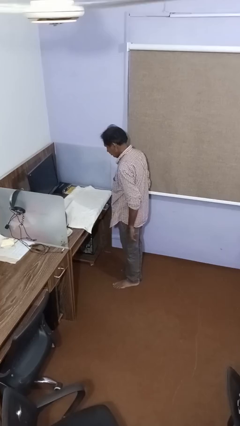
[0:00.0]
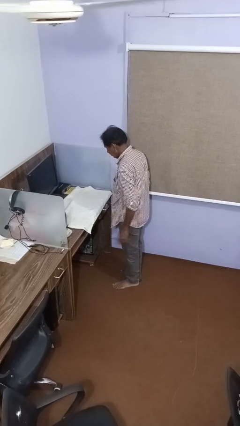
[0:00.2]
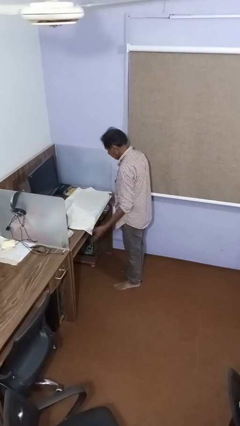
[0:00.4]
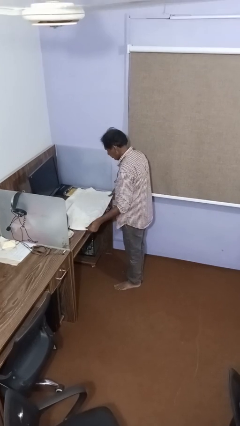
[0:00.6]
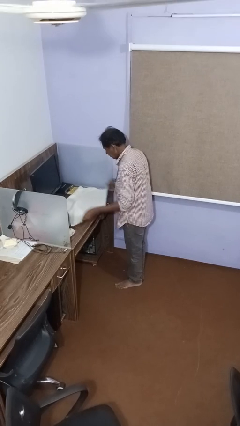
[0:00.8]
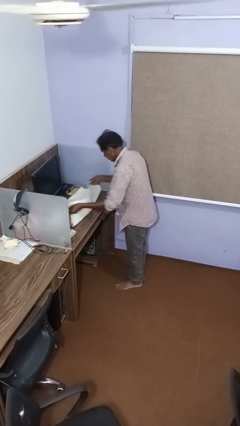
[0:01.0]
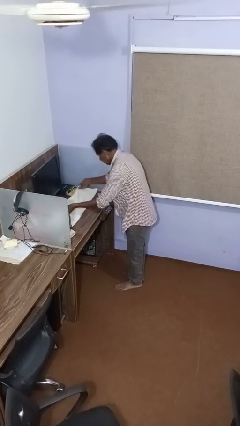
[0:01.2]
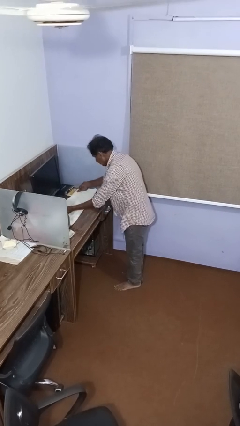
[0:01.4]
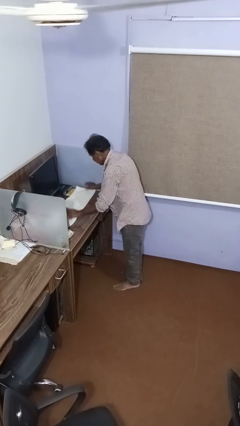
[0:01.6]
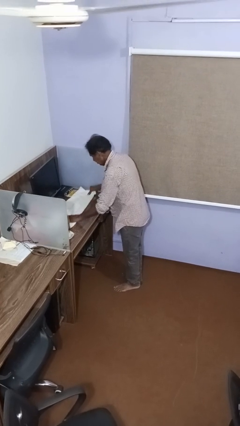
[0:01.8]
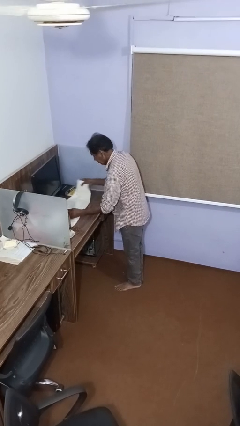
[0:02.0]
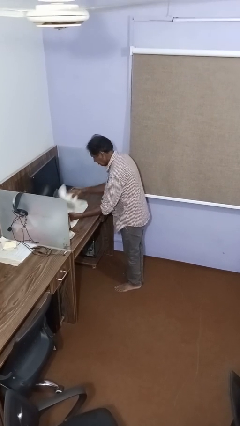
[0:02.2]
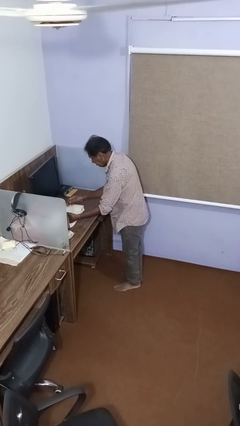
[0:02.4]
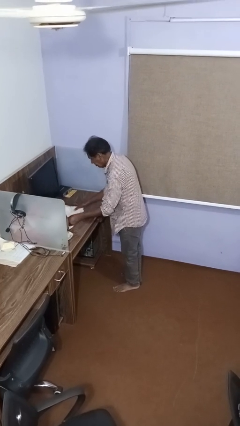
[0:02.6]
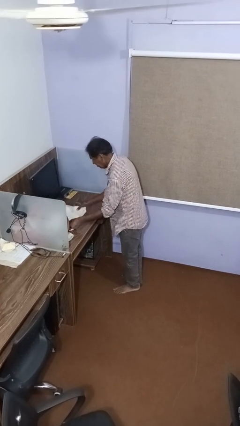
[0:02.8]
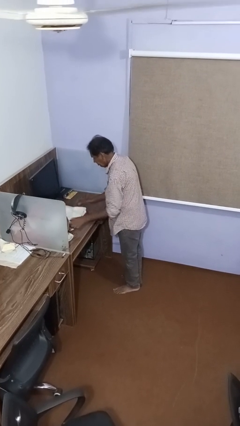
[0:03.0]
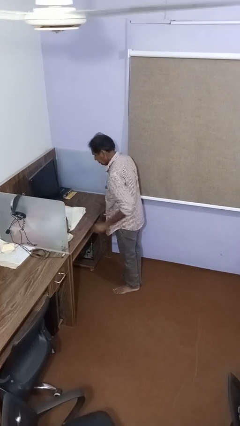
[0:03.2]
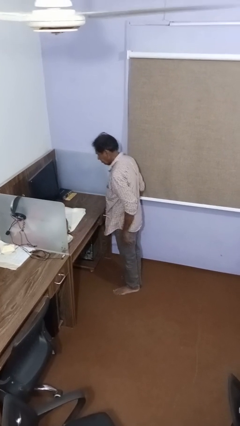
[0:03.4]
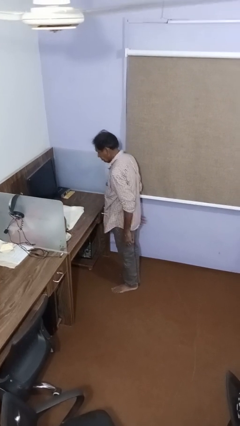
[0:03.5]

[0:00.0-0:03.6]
person folds towel

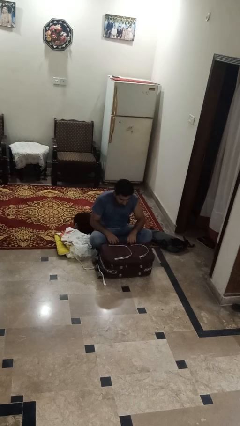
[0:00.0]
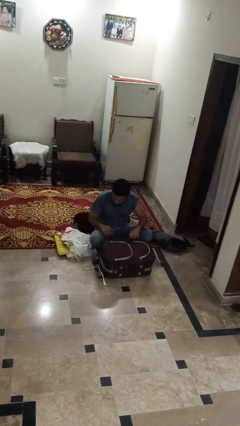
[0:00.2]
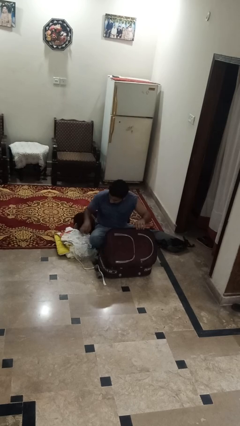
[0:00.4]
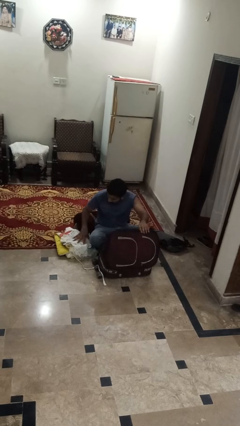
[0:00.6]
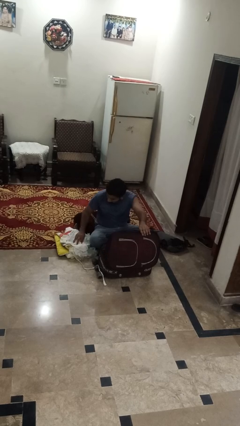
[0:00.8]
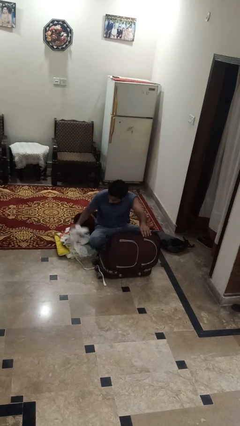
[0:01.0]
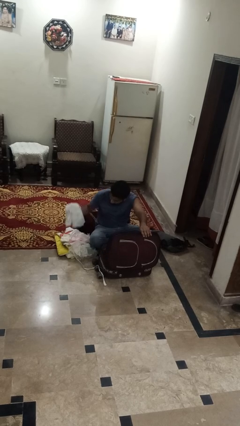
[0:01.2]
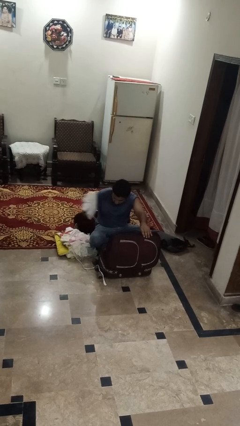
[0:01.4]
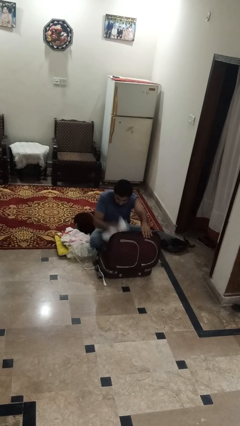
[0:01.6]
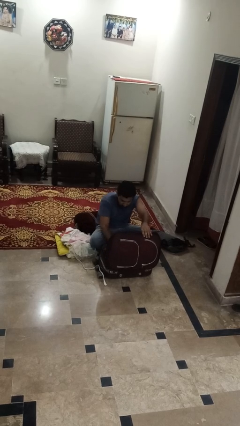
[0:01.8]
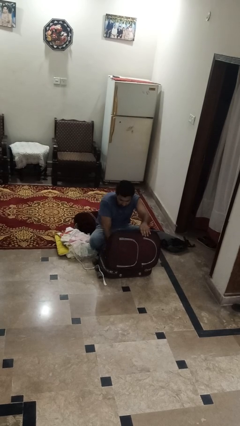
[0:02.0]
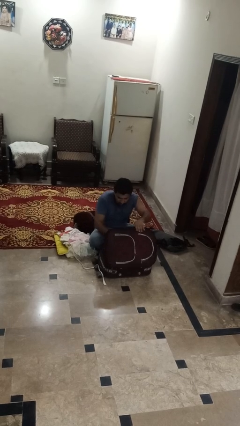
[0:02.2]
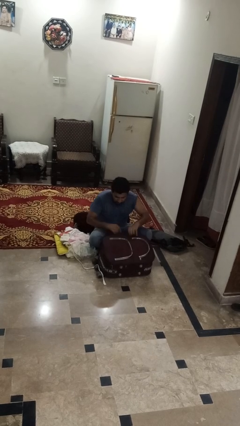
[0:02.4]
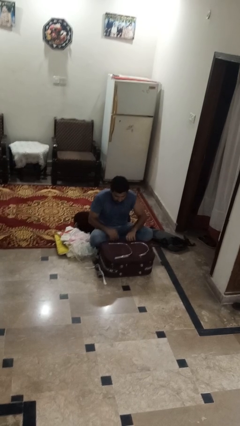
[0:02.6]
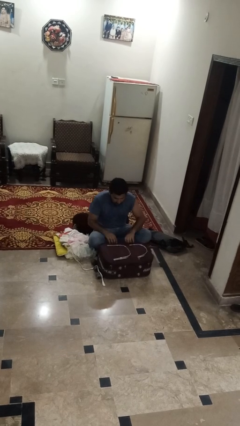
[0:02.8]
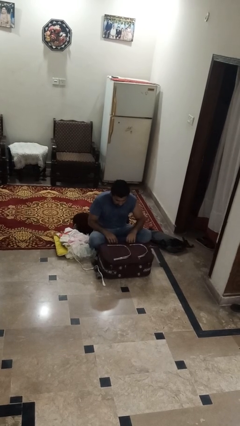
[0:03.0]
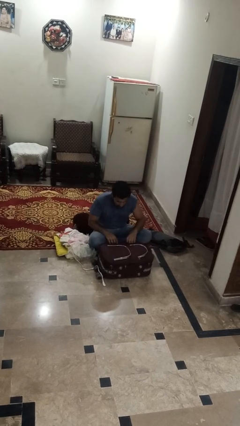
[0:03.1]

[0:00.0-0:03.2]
person loads clothes into suitcase

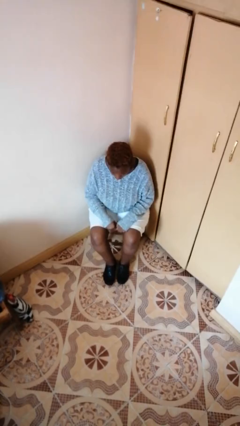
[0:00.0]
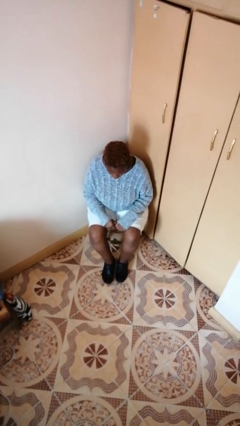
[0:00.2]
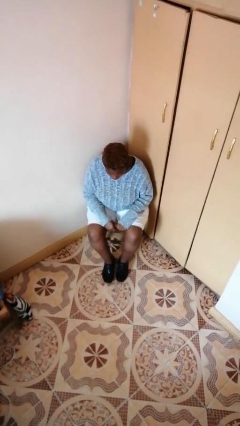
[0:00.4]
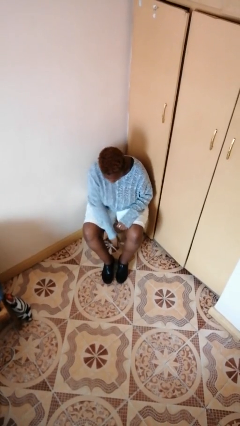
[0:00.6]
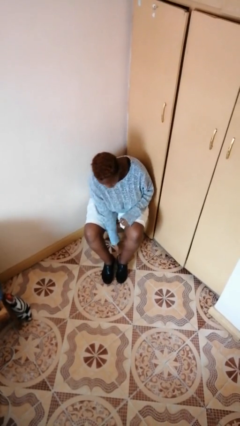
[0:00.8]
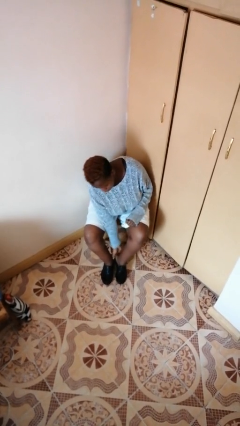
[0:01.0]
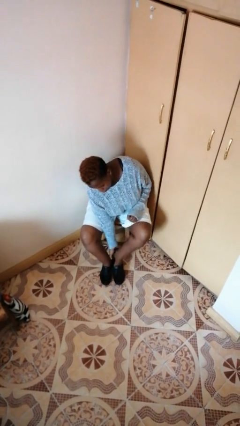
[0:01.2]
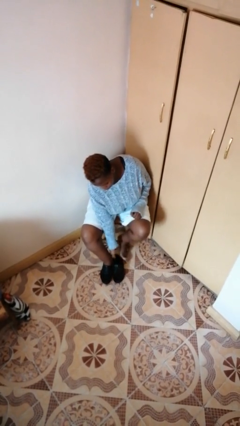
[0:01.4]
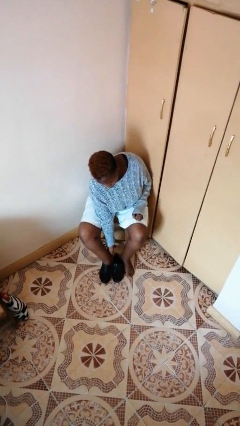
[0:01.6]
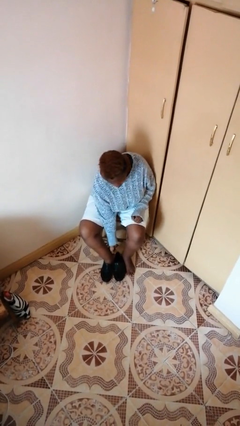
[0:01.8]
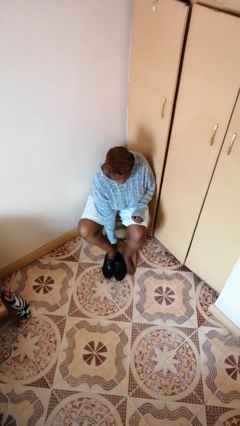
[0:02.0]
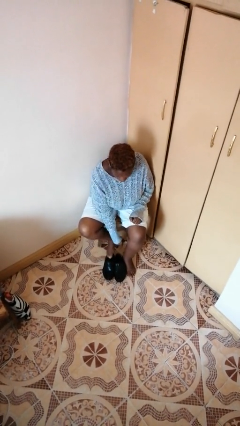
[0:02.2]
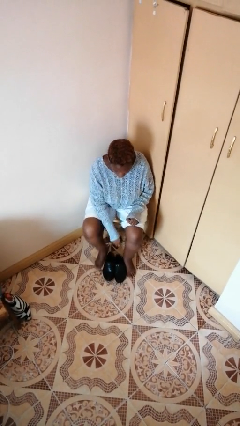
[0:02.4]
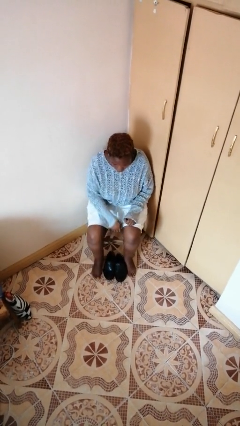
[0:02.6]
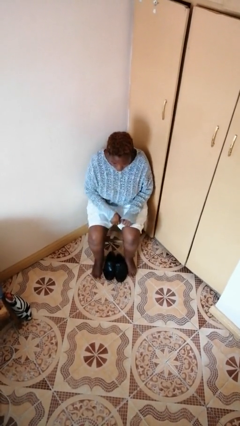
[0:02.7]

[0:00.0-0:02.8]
person takes off shoes

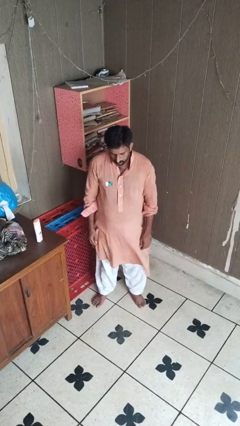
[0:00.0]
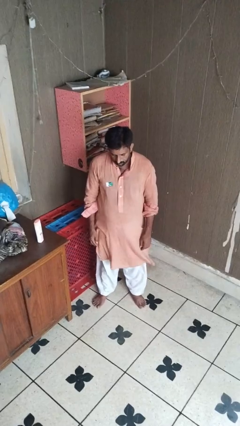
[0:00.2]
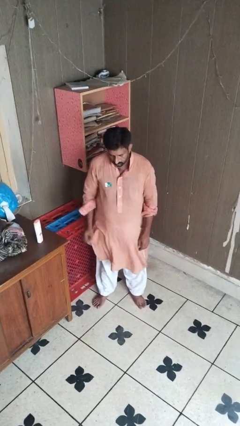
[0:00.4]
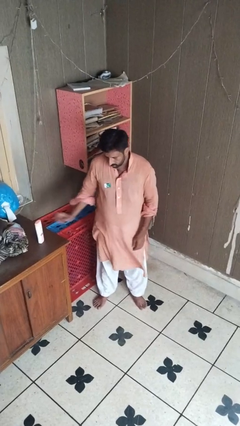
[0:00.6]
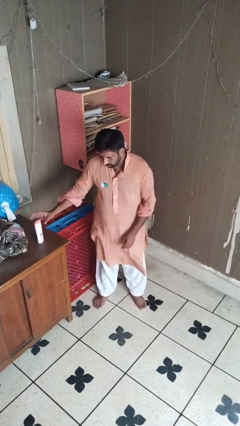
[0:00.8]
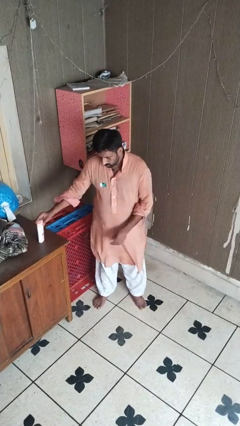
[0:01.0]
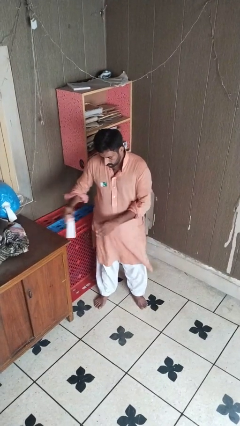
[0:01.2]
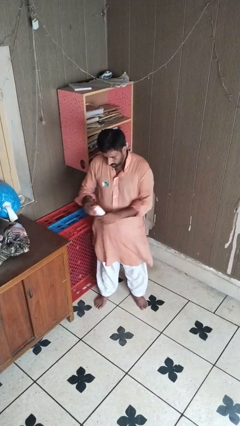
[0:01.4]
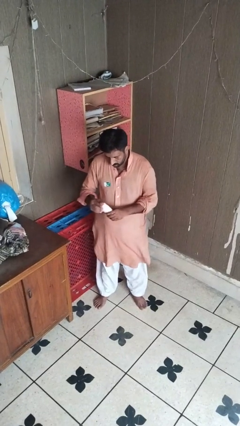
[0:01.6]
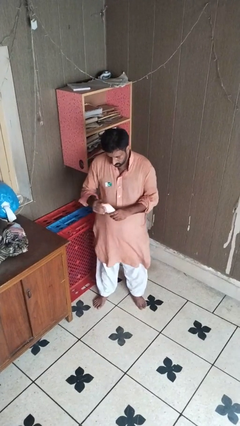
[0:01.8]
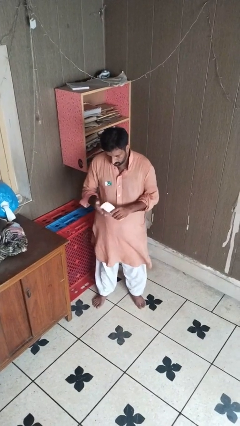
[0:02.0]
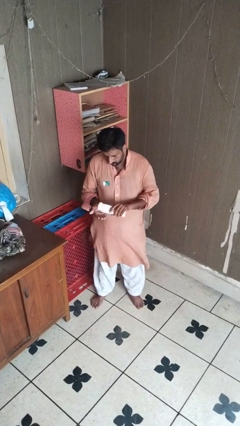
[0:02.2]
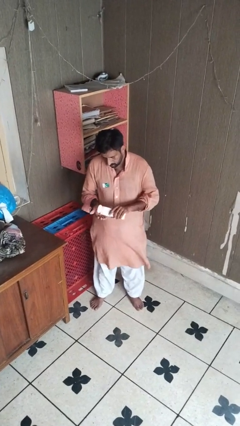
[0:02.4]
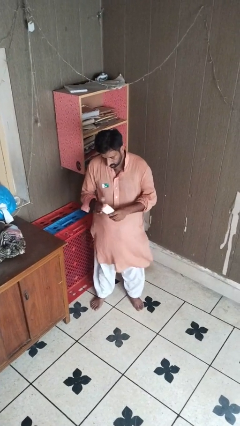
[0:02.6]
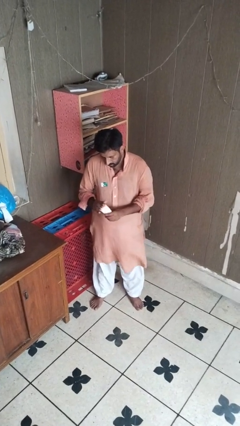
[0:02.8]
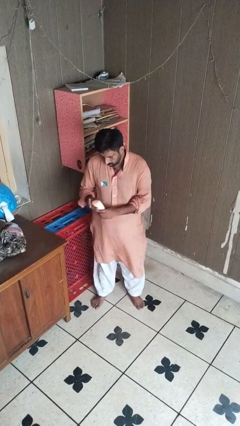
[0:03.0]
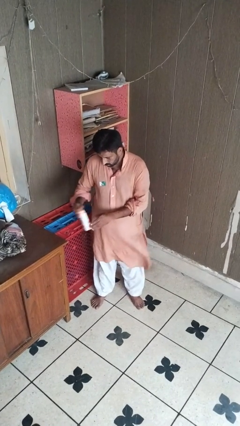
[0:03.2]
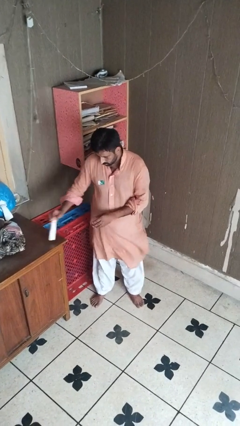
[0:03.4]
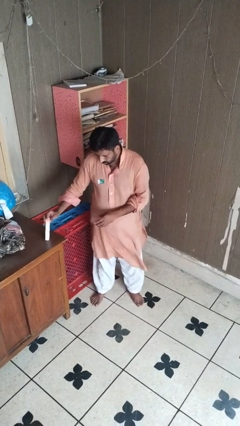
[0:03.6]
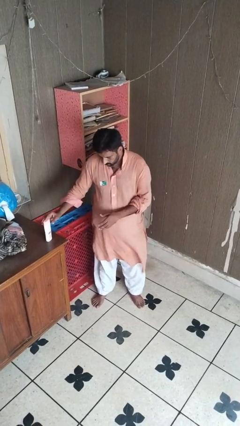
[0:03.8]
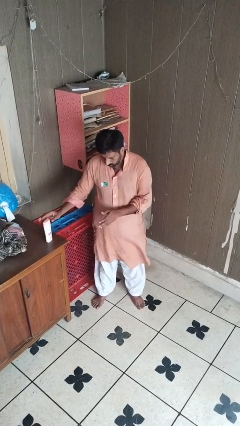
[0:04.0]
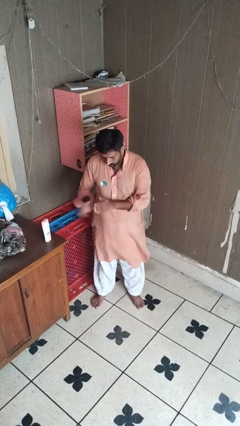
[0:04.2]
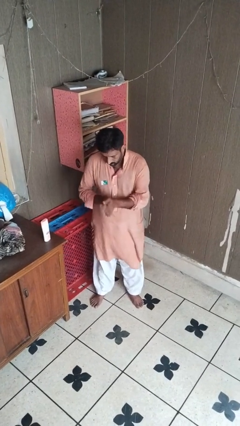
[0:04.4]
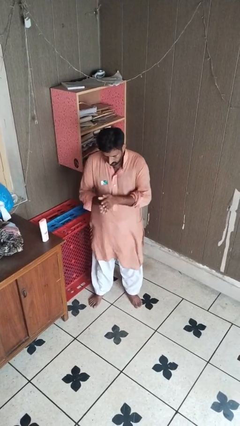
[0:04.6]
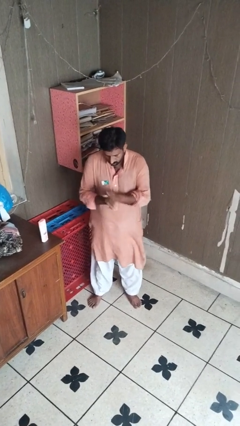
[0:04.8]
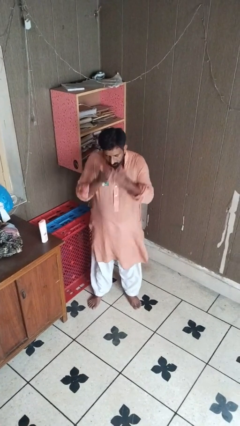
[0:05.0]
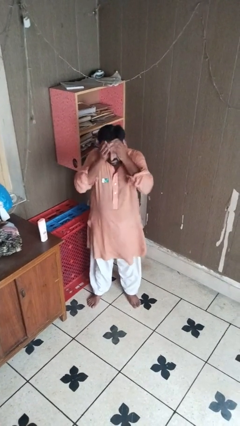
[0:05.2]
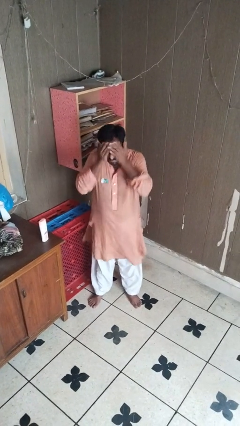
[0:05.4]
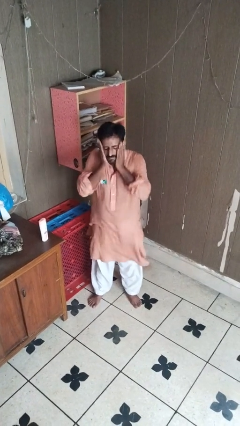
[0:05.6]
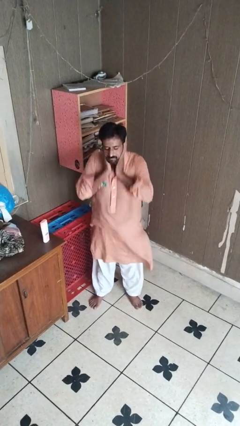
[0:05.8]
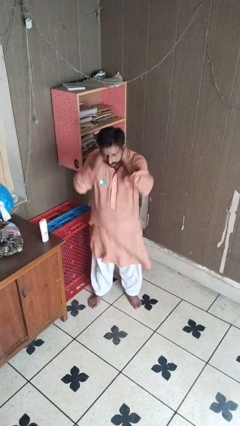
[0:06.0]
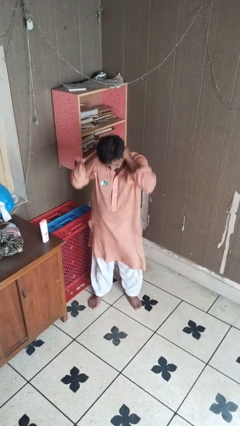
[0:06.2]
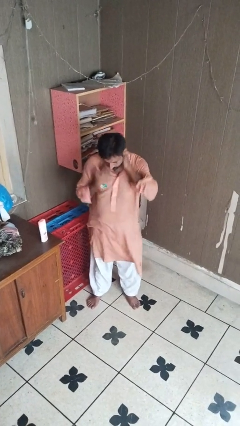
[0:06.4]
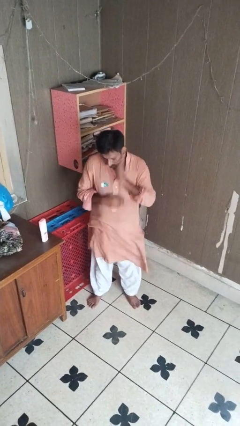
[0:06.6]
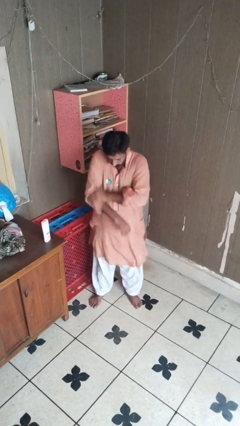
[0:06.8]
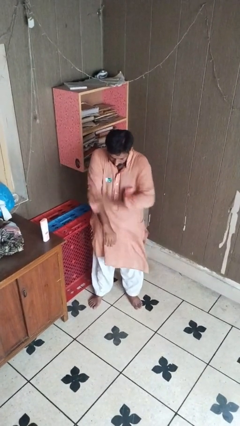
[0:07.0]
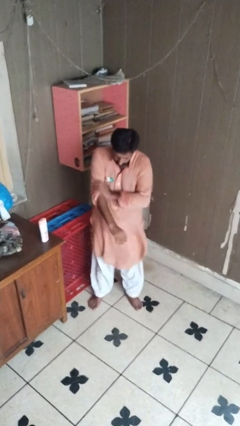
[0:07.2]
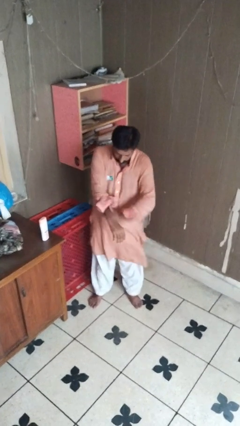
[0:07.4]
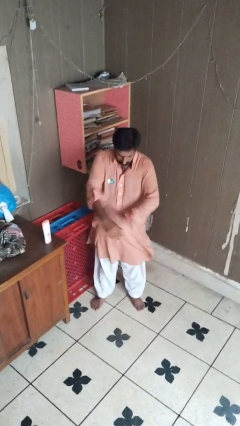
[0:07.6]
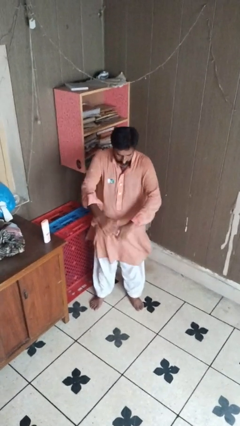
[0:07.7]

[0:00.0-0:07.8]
person applies facial moisturizer
